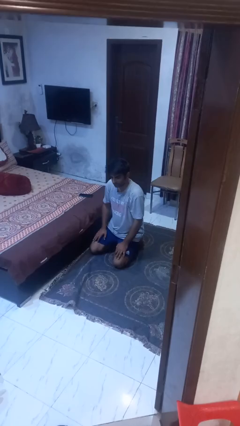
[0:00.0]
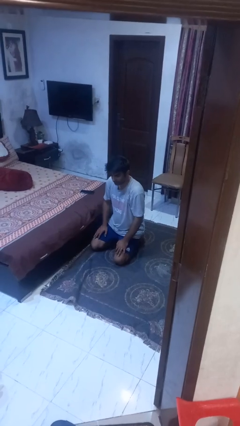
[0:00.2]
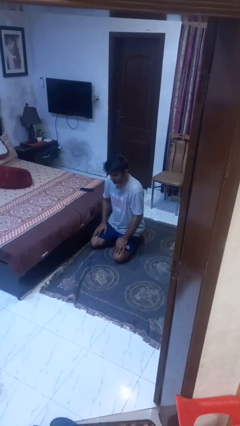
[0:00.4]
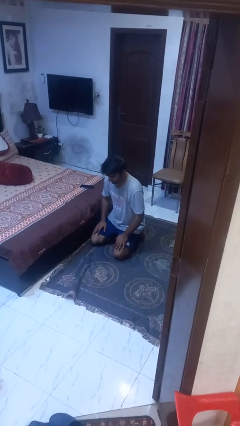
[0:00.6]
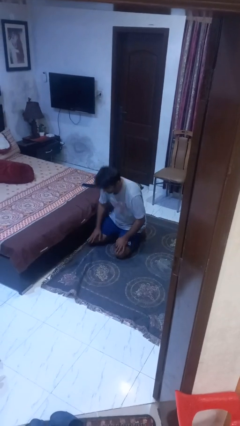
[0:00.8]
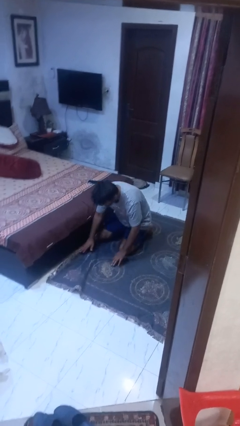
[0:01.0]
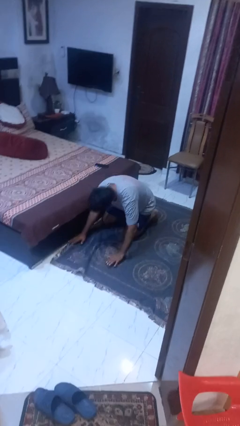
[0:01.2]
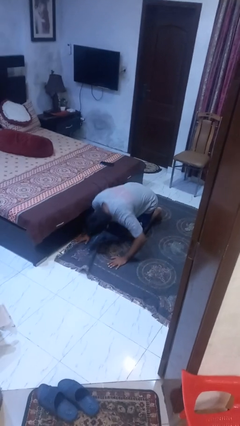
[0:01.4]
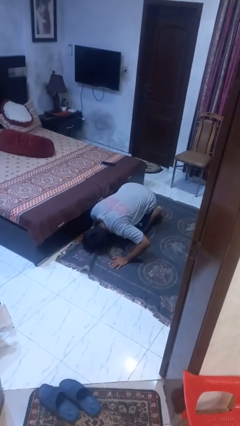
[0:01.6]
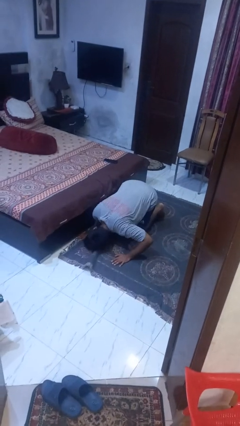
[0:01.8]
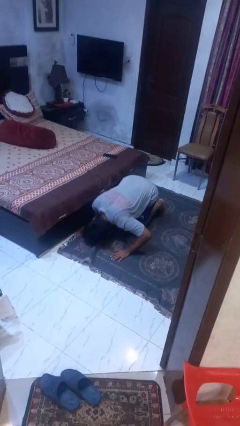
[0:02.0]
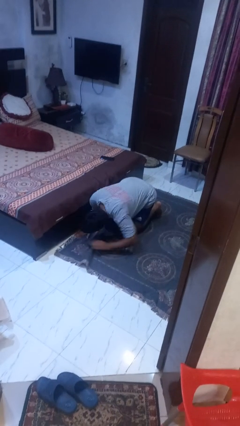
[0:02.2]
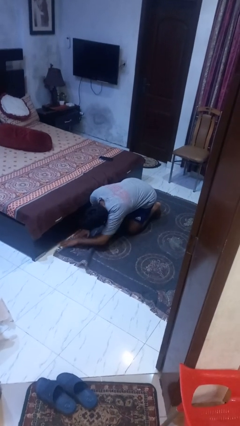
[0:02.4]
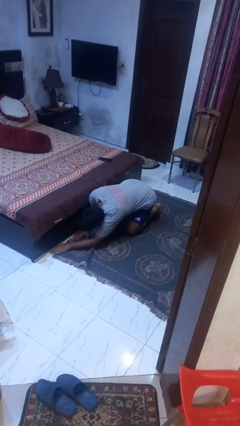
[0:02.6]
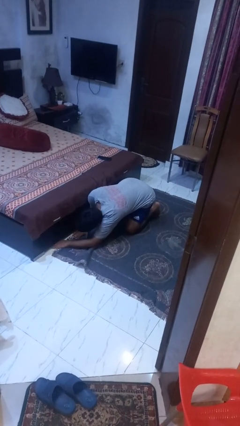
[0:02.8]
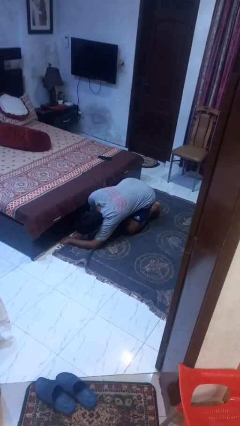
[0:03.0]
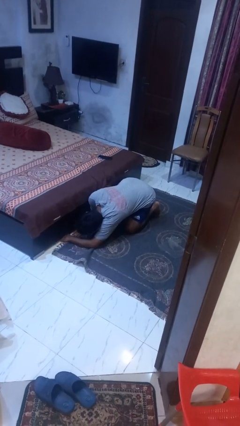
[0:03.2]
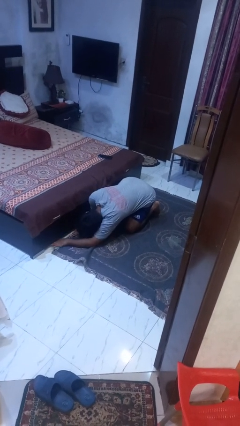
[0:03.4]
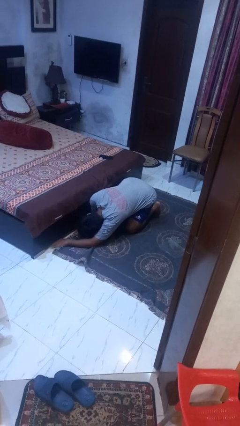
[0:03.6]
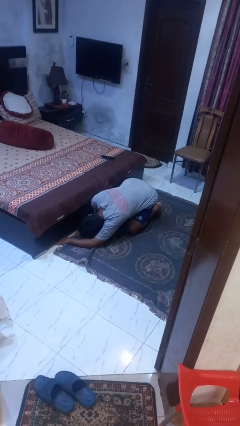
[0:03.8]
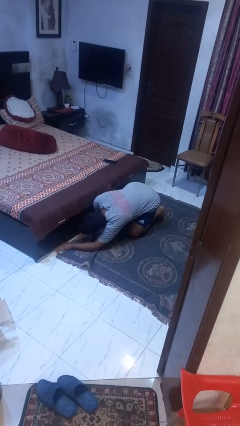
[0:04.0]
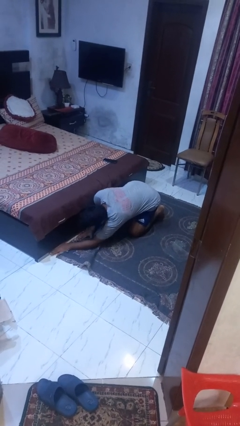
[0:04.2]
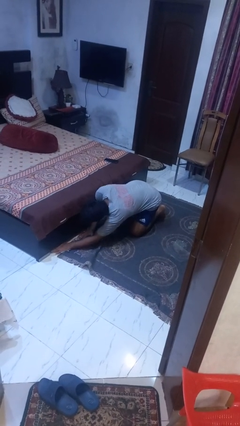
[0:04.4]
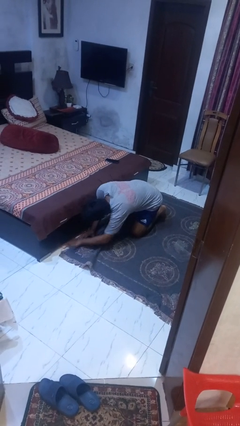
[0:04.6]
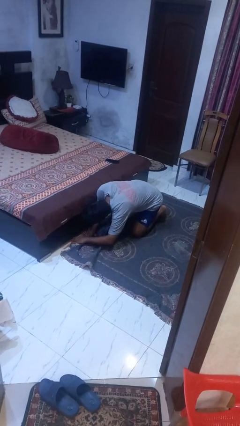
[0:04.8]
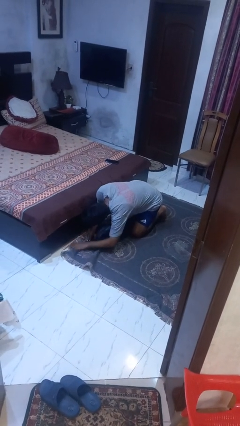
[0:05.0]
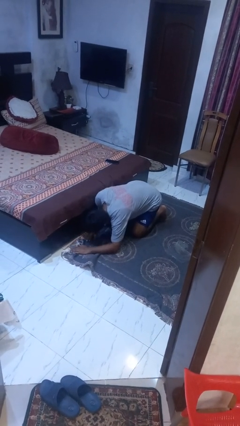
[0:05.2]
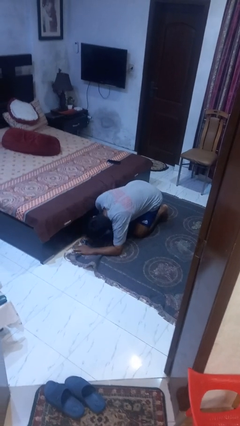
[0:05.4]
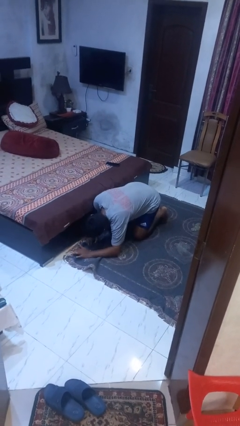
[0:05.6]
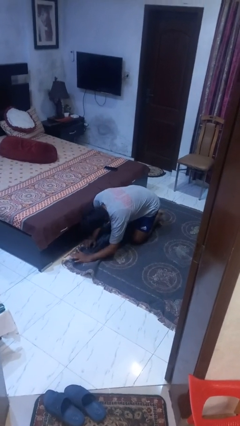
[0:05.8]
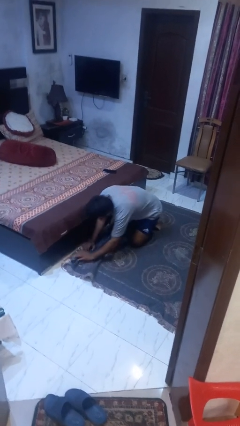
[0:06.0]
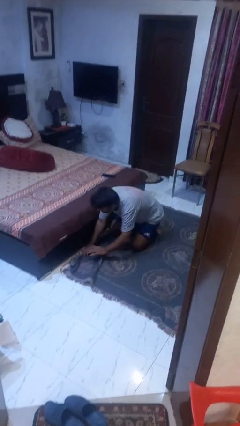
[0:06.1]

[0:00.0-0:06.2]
person searches under bed

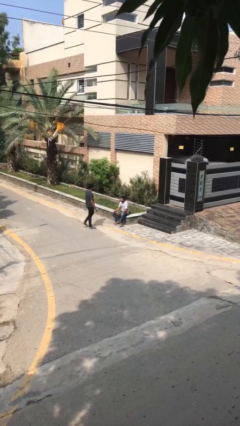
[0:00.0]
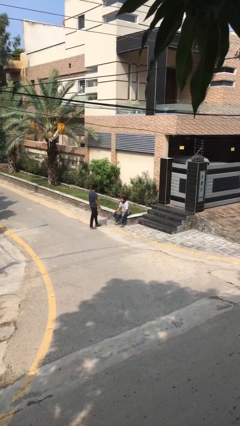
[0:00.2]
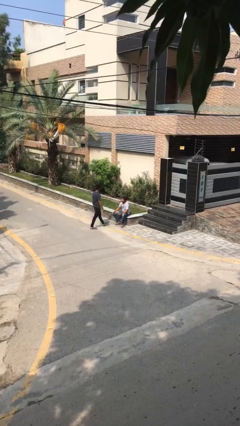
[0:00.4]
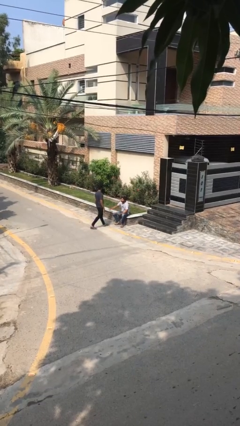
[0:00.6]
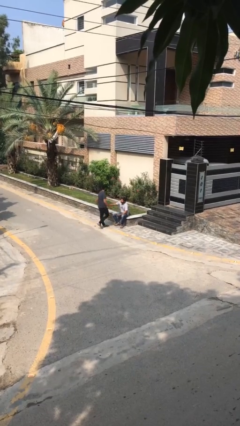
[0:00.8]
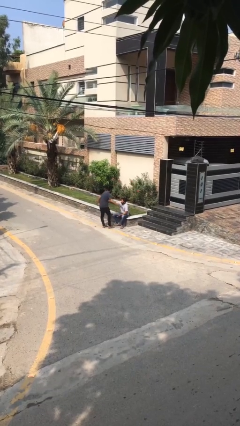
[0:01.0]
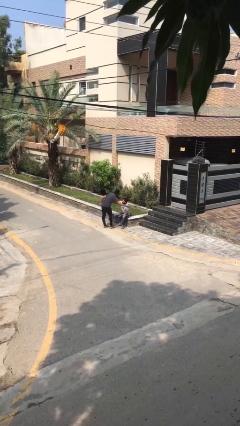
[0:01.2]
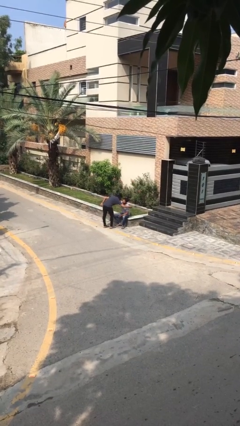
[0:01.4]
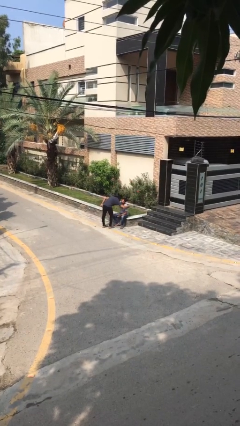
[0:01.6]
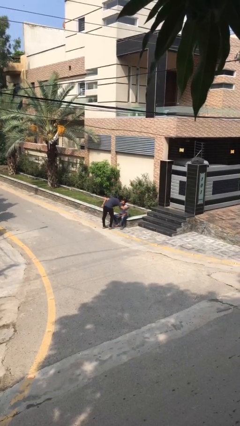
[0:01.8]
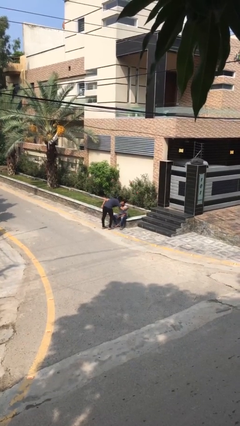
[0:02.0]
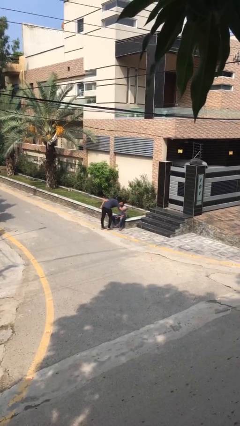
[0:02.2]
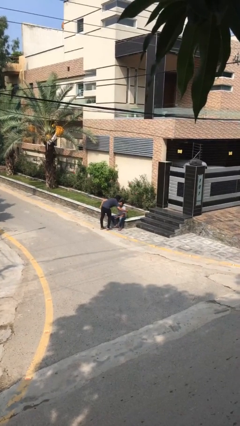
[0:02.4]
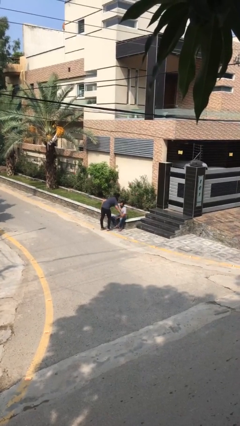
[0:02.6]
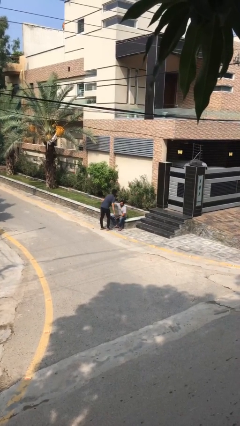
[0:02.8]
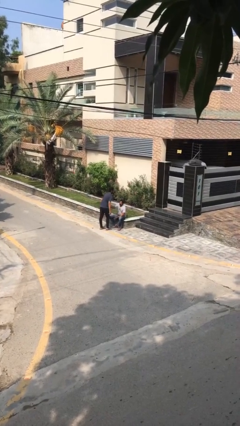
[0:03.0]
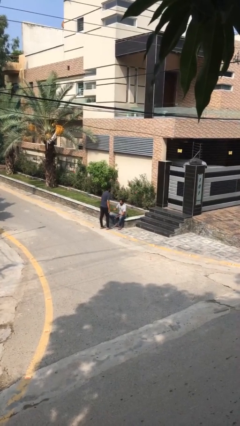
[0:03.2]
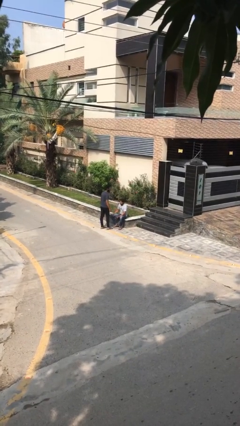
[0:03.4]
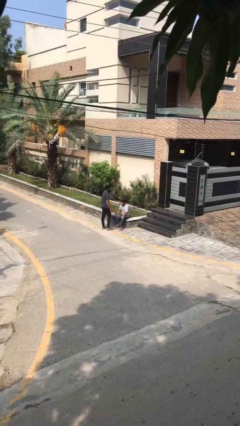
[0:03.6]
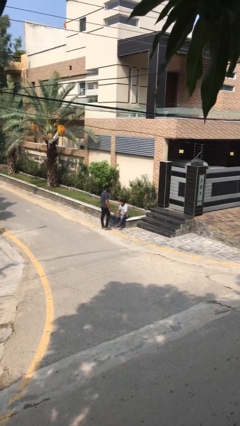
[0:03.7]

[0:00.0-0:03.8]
person embraces person

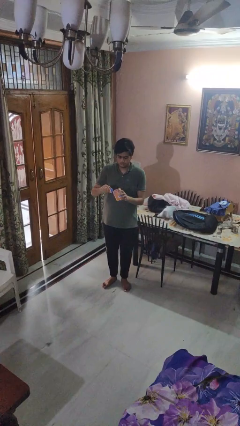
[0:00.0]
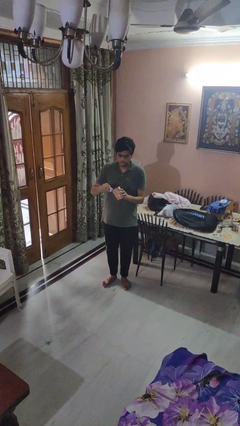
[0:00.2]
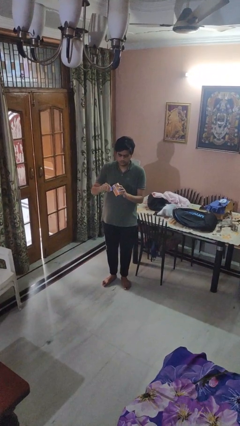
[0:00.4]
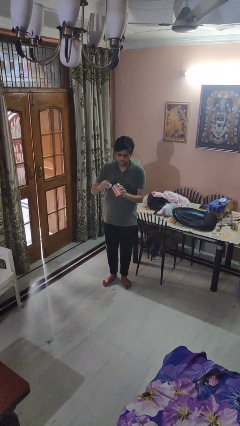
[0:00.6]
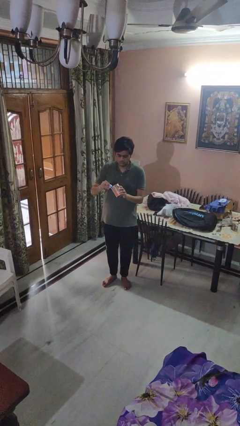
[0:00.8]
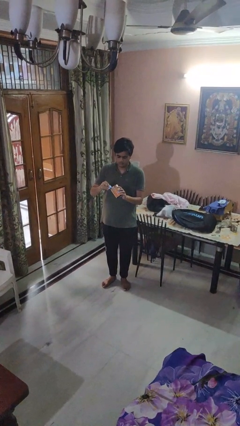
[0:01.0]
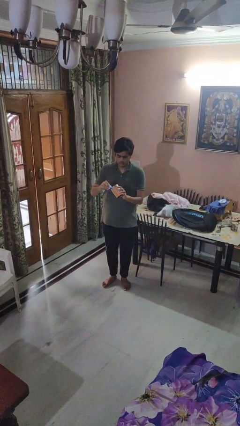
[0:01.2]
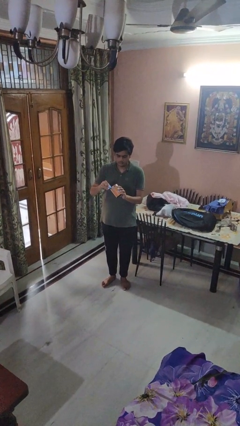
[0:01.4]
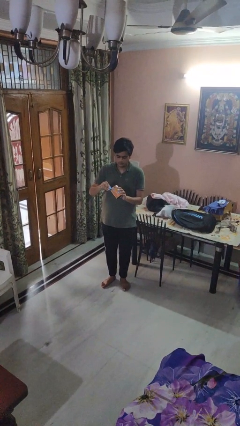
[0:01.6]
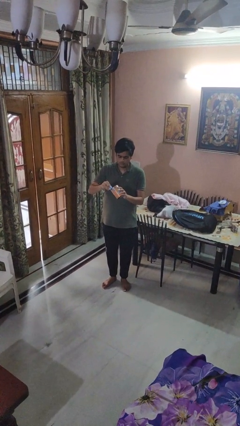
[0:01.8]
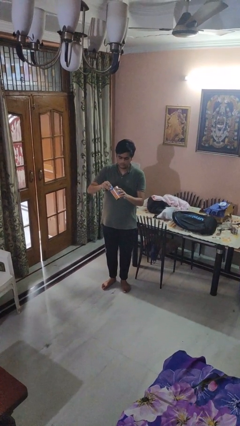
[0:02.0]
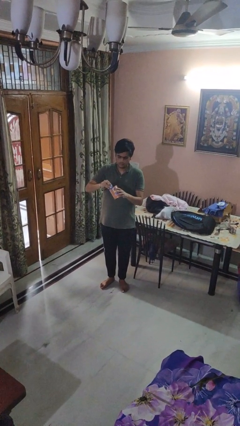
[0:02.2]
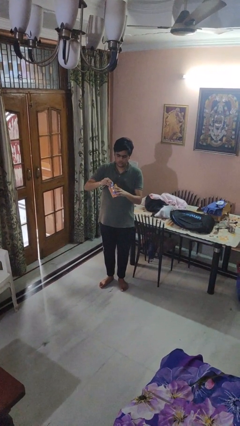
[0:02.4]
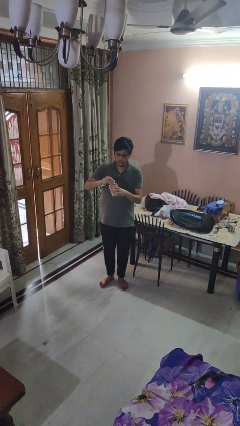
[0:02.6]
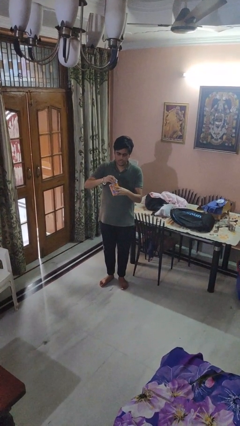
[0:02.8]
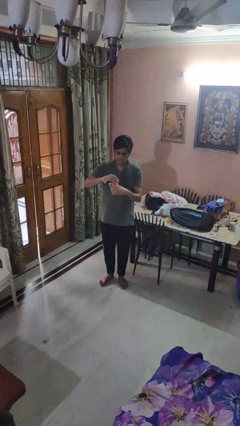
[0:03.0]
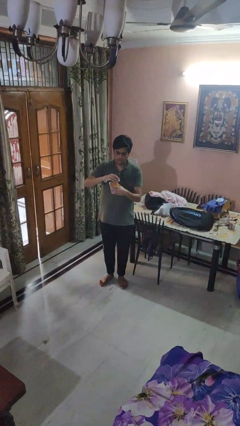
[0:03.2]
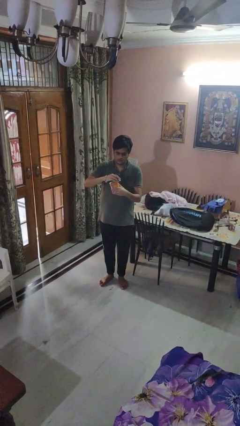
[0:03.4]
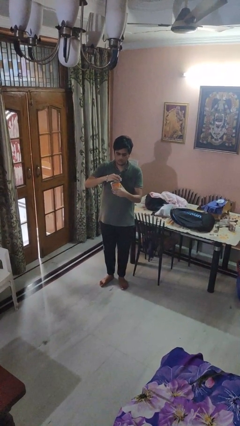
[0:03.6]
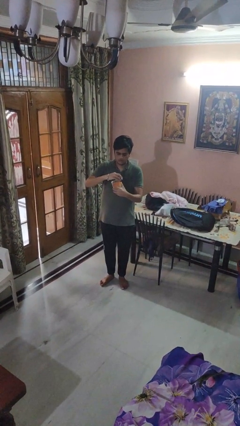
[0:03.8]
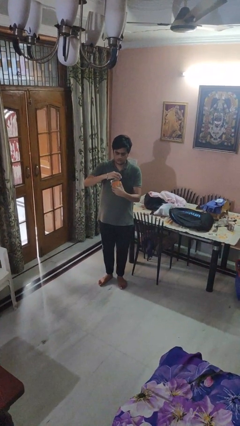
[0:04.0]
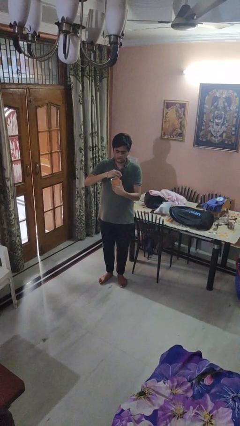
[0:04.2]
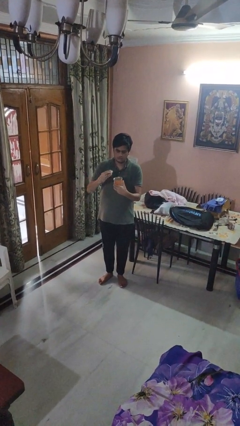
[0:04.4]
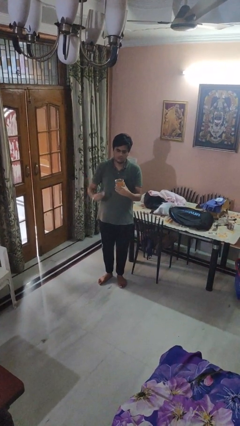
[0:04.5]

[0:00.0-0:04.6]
person opens can with can opener

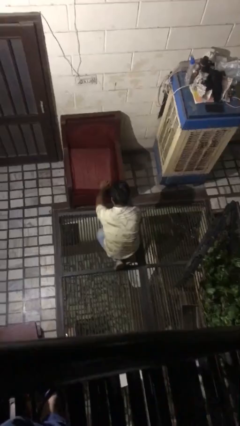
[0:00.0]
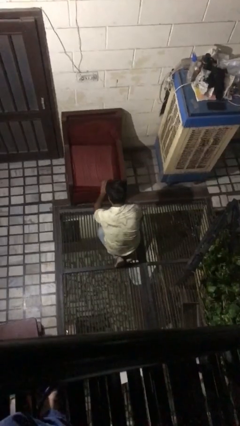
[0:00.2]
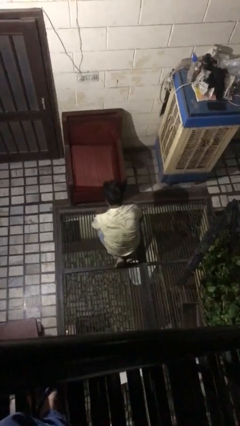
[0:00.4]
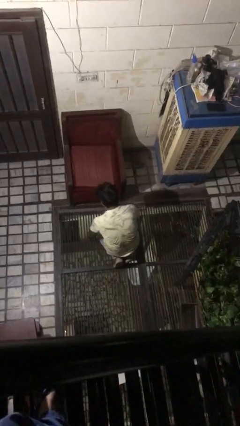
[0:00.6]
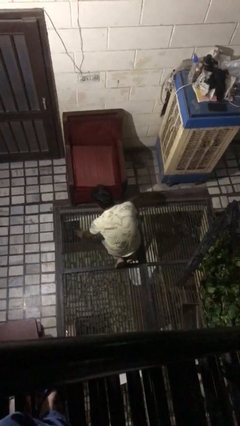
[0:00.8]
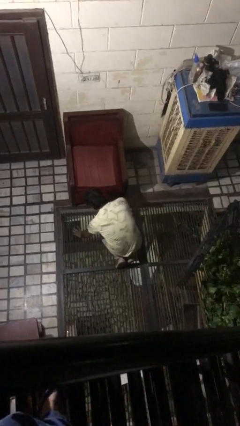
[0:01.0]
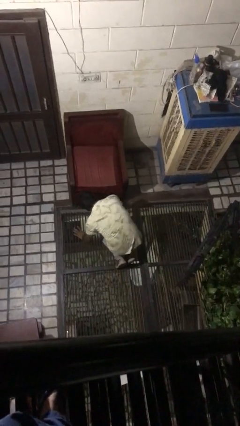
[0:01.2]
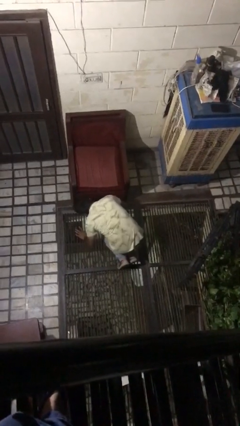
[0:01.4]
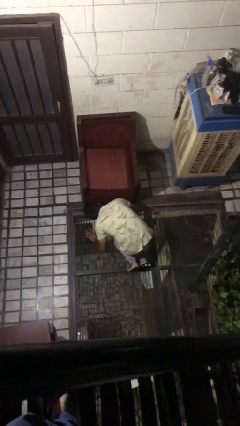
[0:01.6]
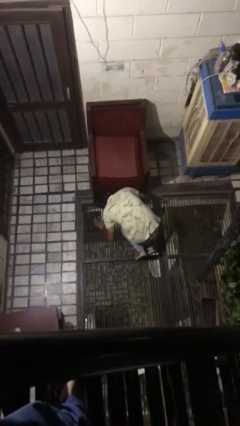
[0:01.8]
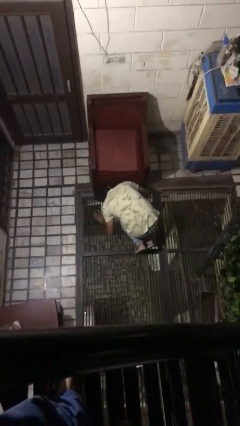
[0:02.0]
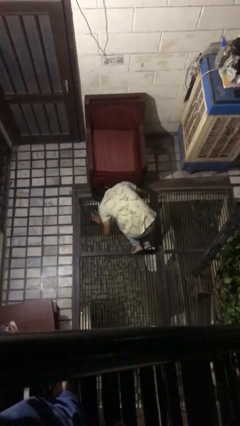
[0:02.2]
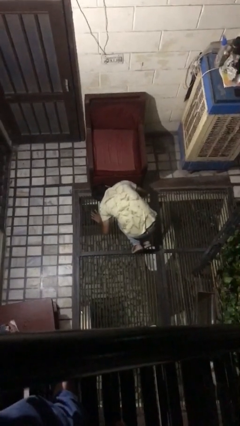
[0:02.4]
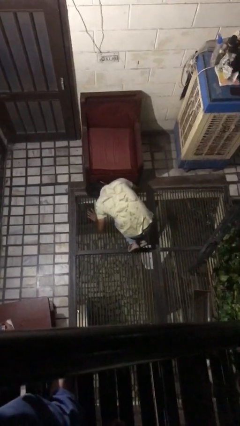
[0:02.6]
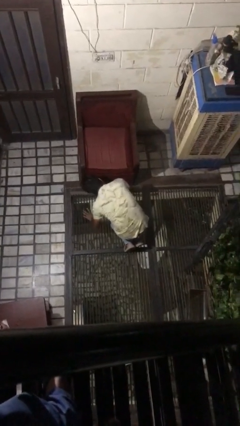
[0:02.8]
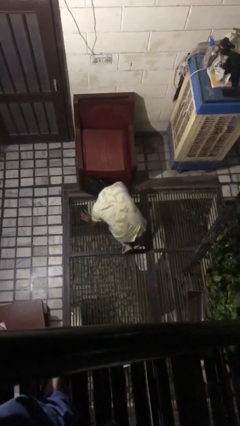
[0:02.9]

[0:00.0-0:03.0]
person searches under couch

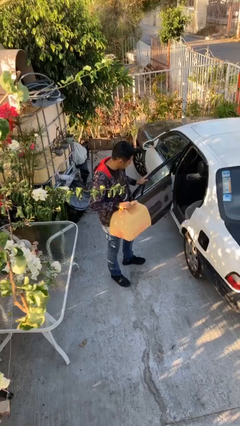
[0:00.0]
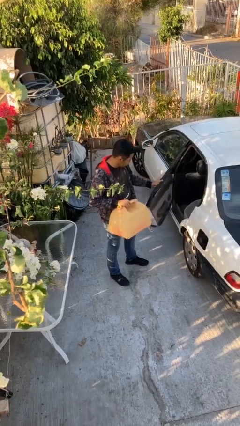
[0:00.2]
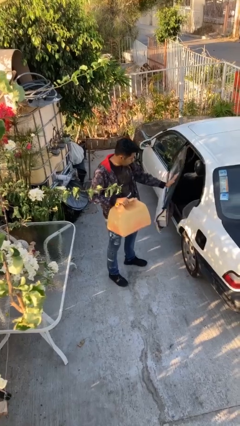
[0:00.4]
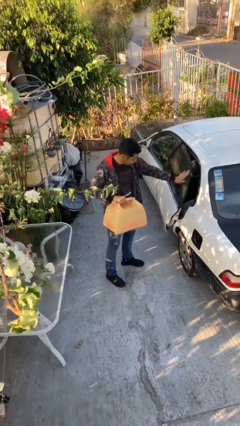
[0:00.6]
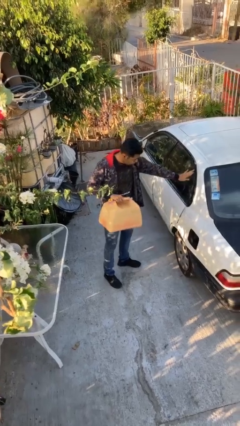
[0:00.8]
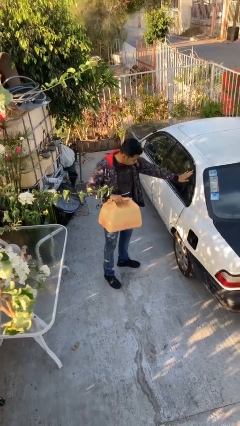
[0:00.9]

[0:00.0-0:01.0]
person closes car door
